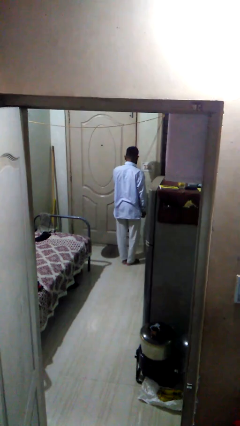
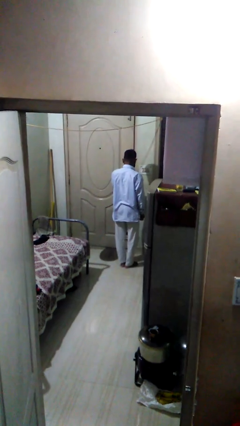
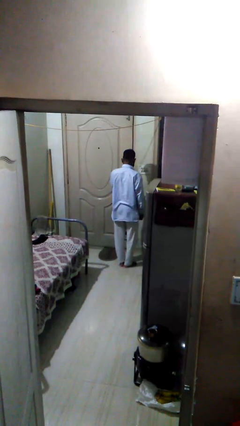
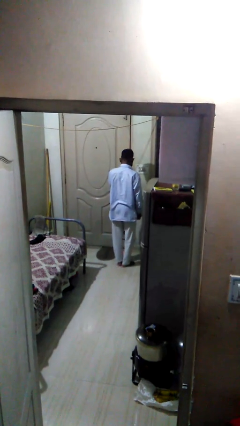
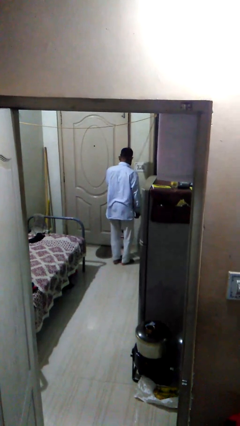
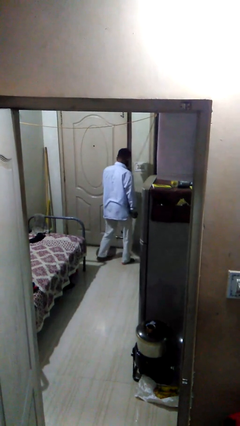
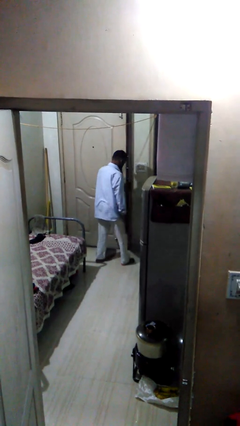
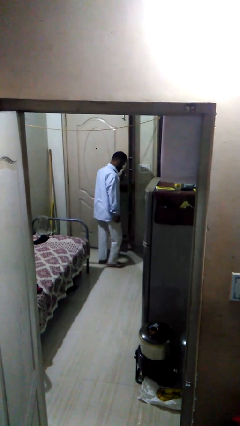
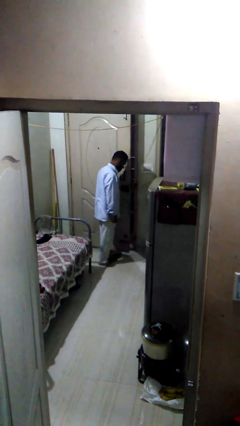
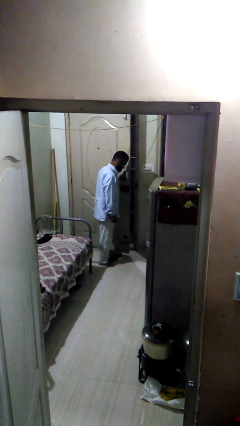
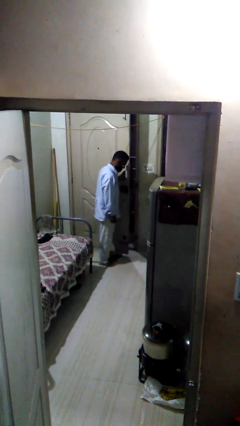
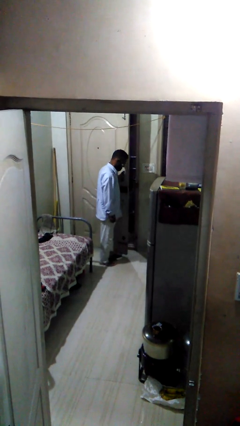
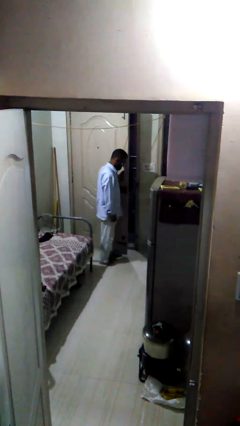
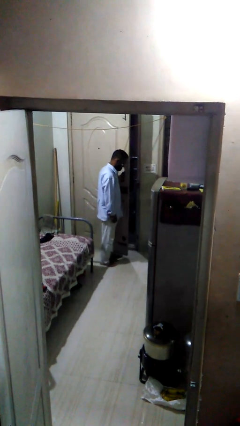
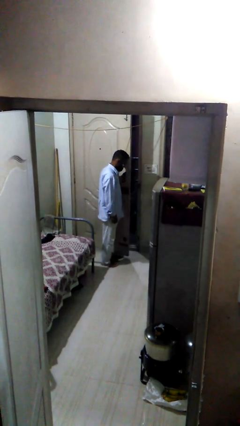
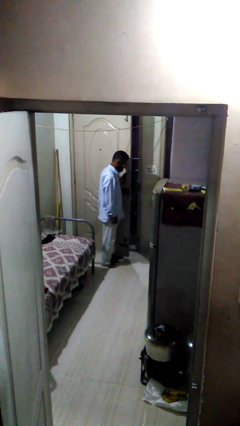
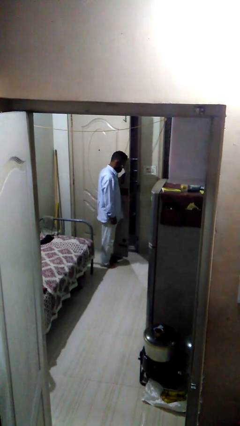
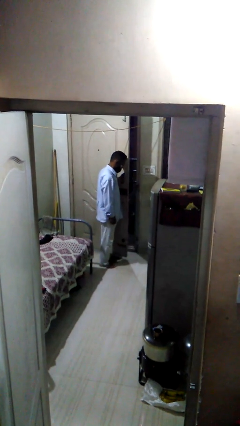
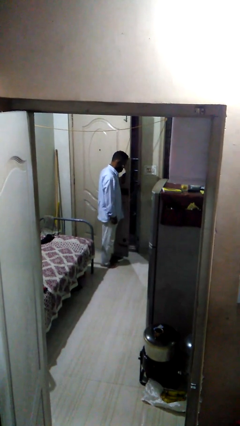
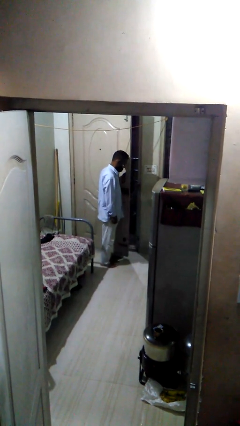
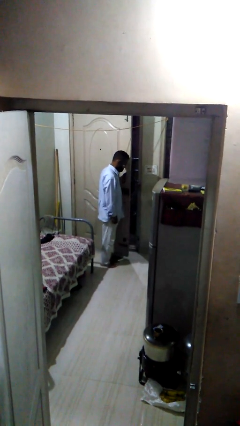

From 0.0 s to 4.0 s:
person opens facility door

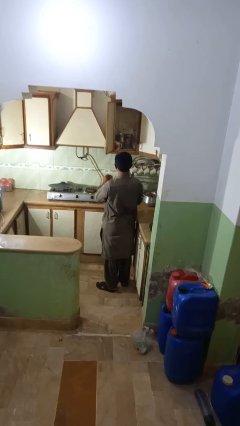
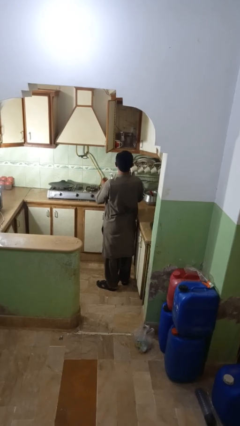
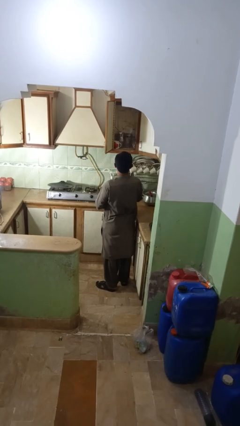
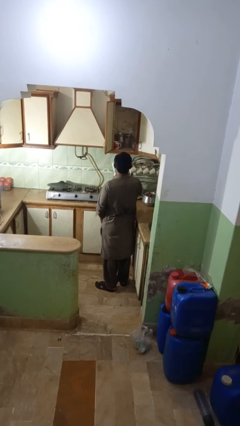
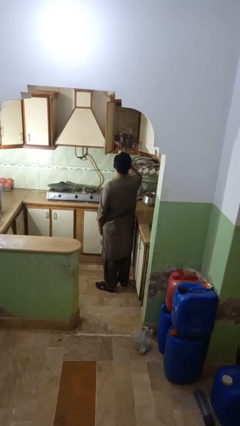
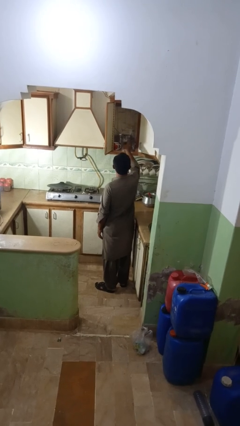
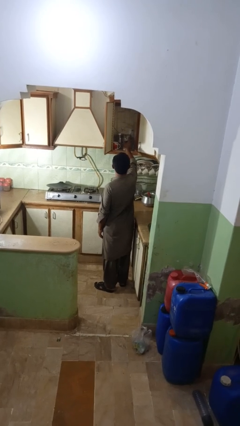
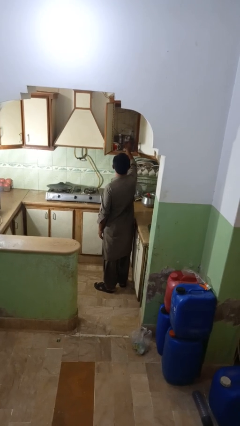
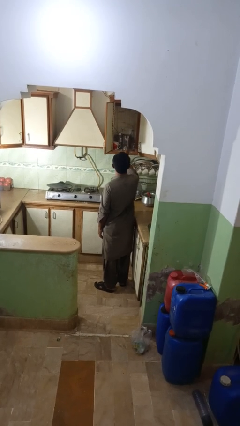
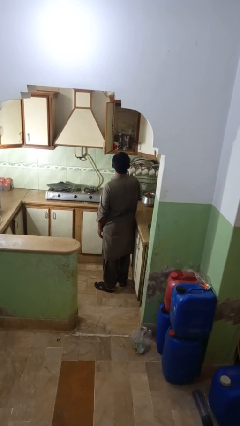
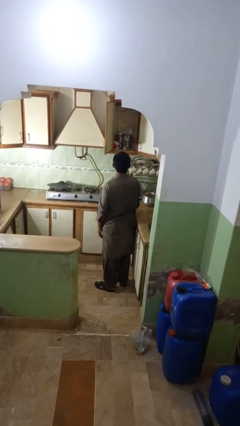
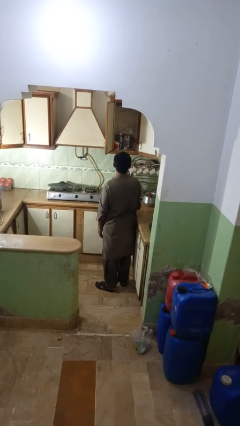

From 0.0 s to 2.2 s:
person puts object into kitchen drawer

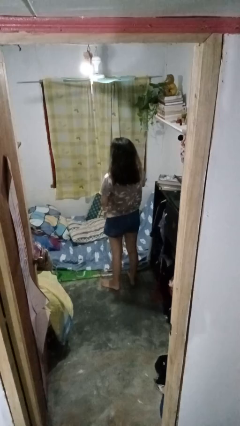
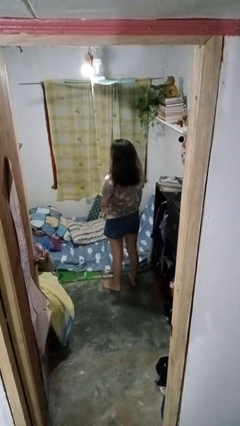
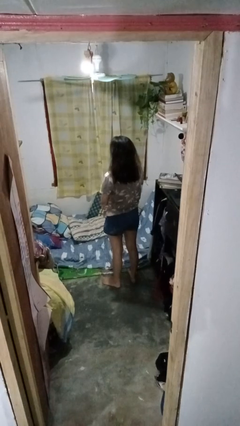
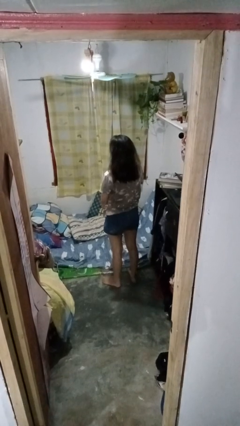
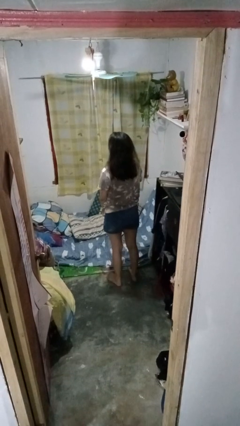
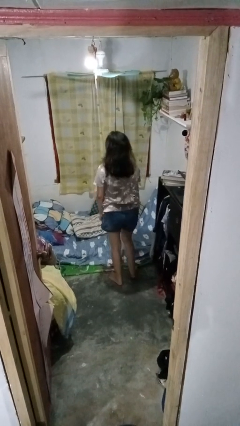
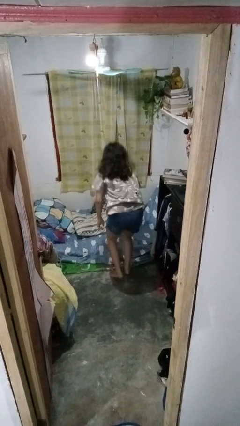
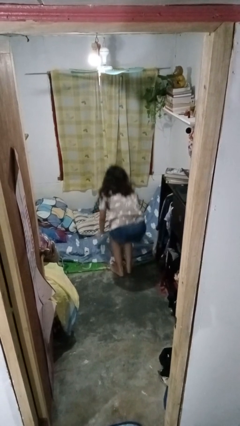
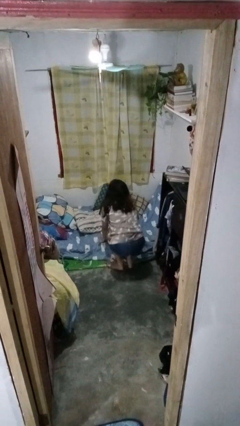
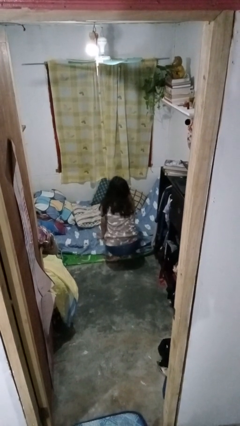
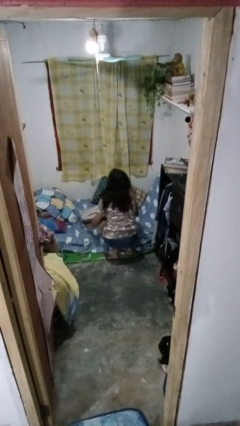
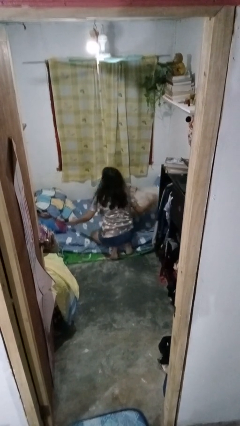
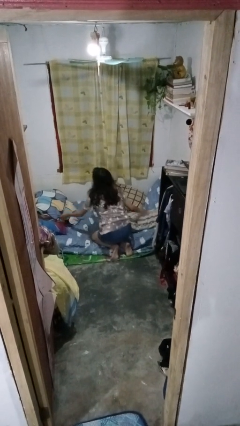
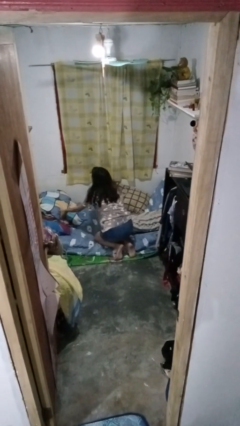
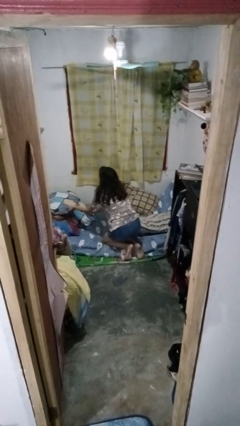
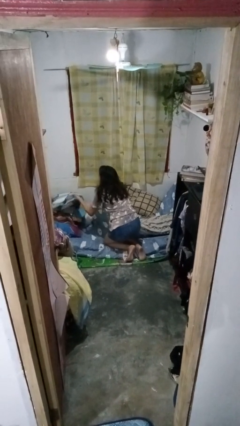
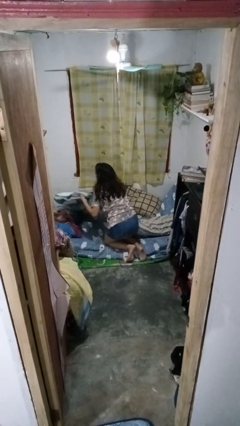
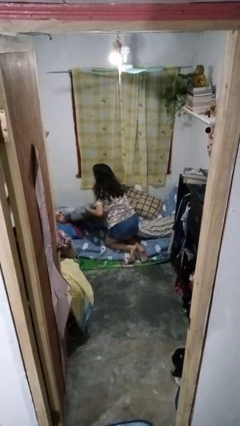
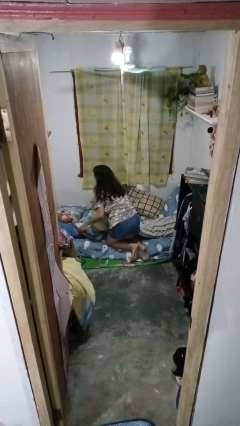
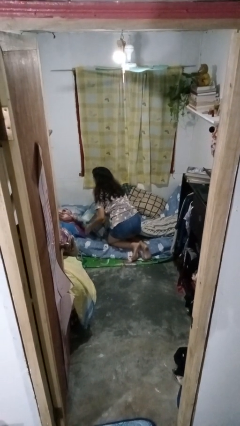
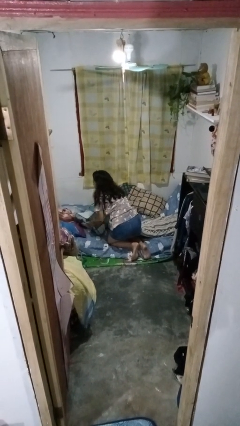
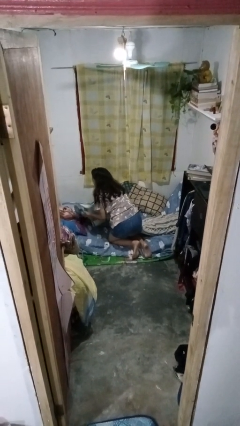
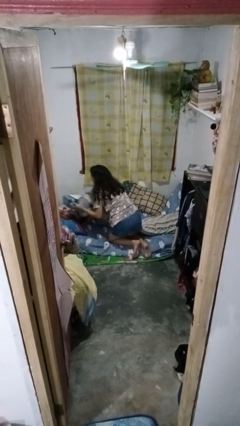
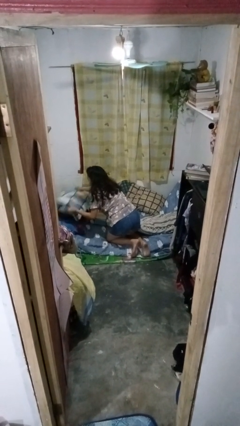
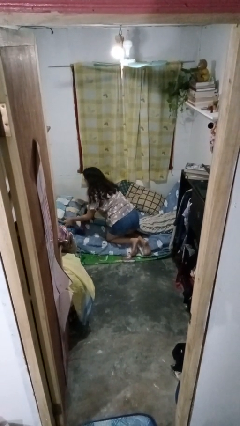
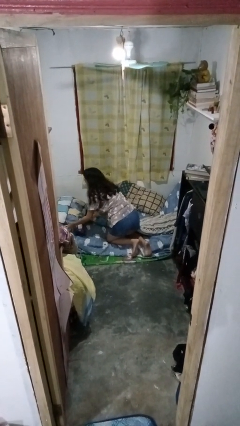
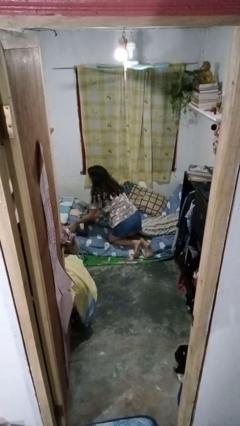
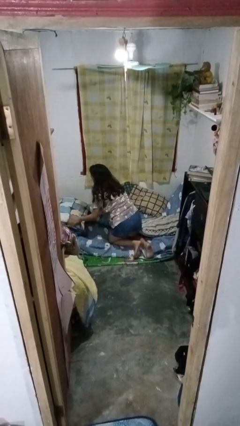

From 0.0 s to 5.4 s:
person makes bed

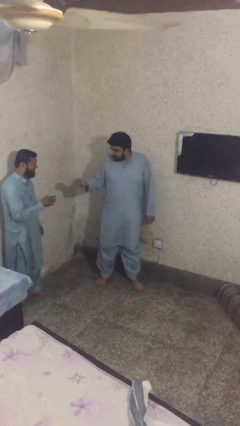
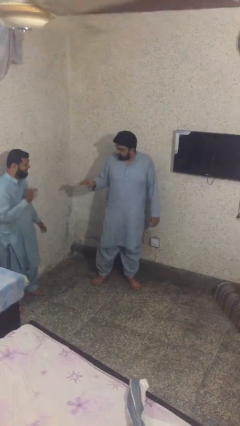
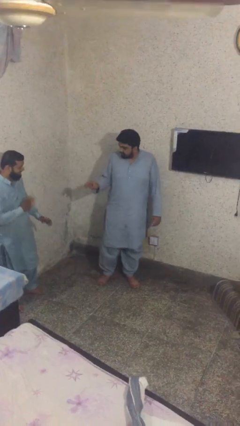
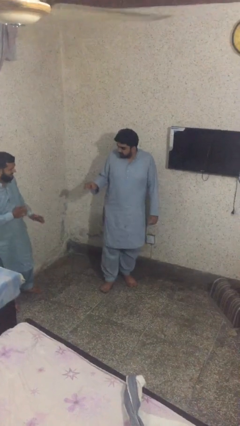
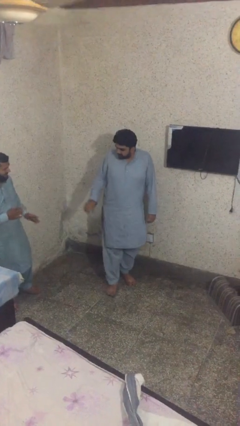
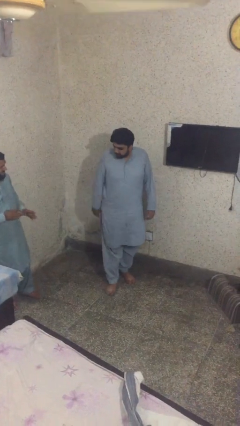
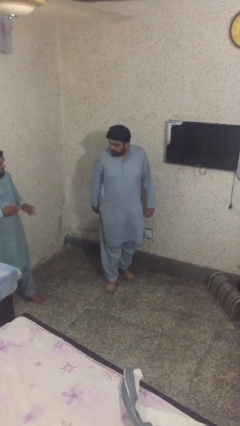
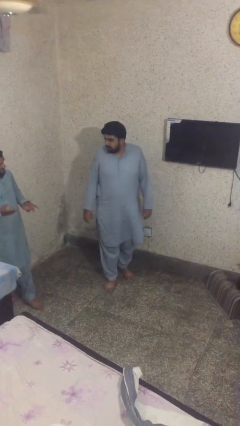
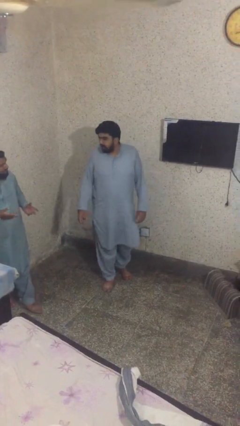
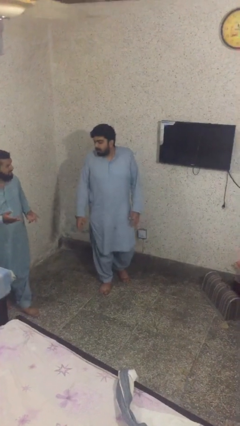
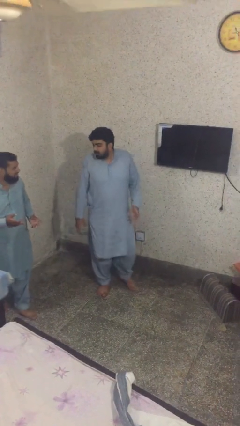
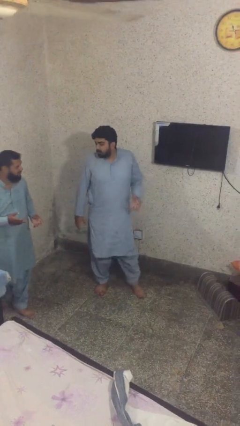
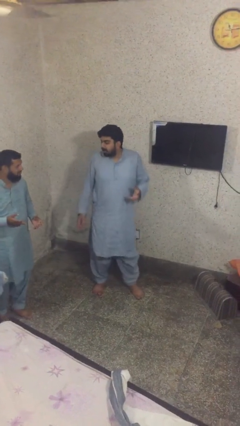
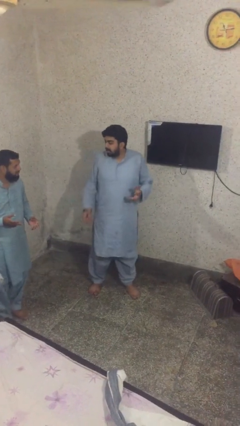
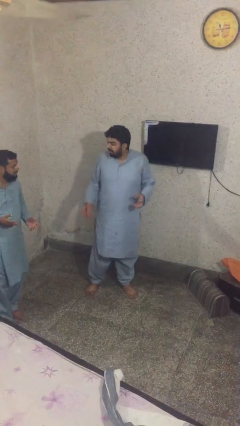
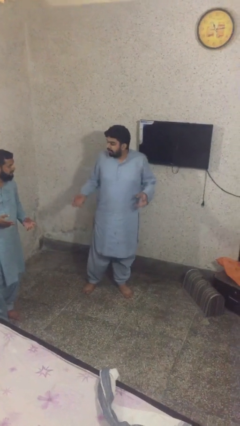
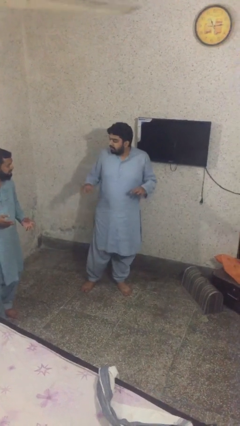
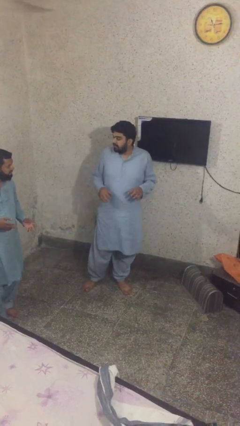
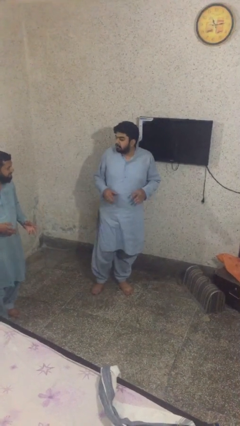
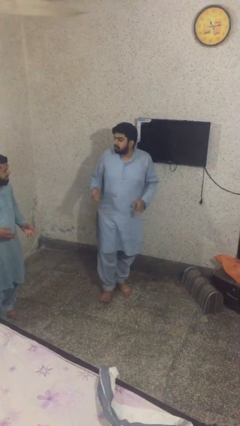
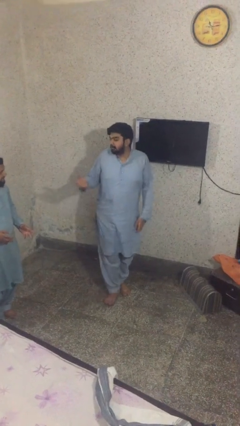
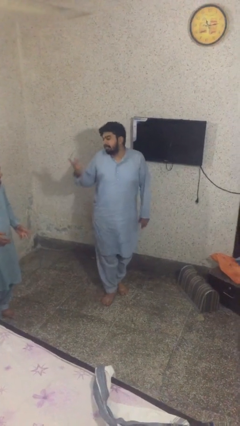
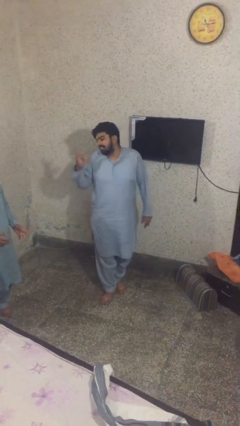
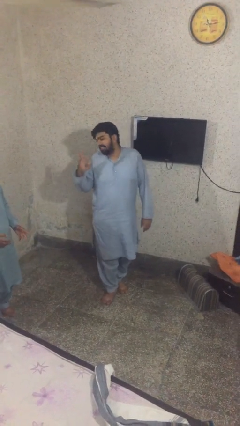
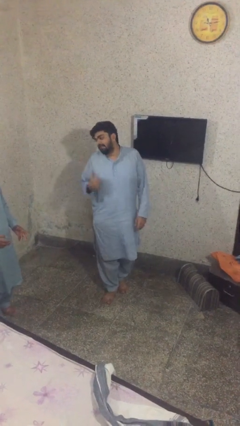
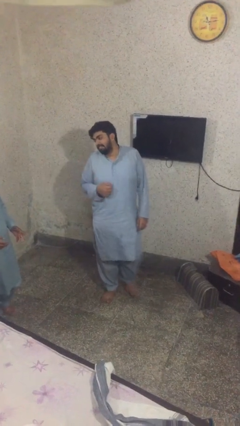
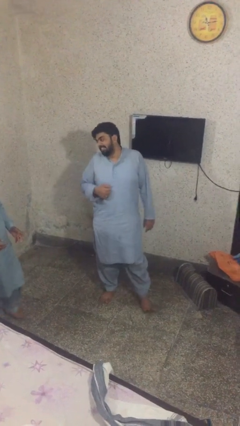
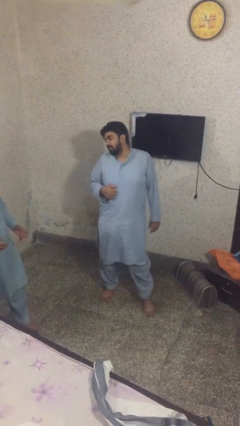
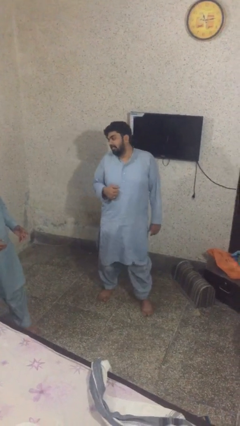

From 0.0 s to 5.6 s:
person talks to person

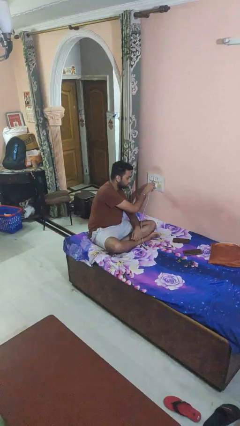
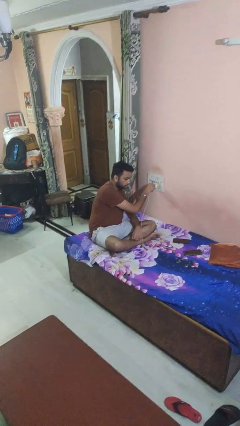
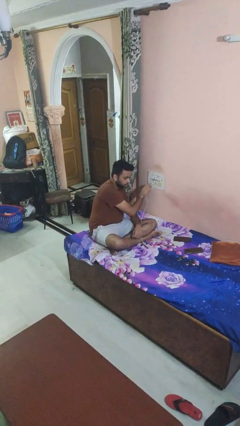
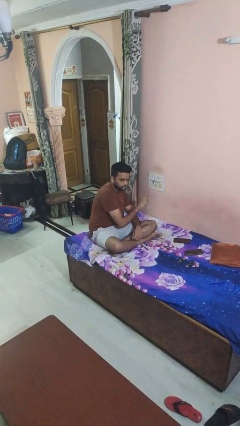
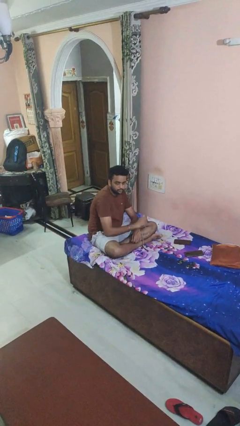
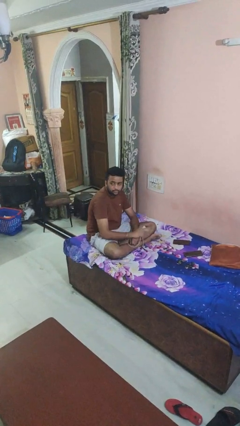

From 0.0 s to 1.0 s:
person unplugs from electrical socket
